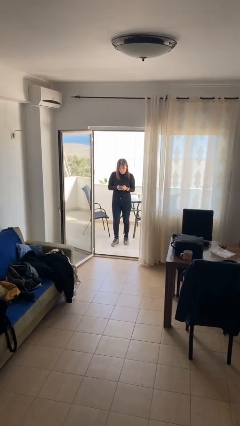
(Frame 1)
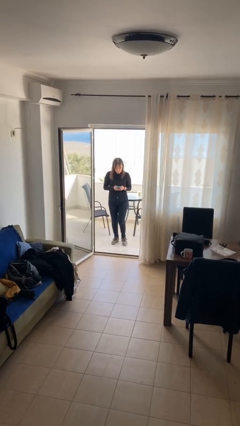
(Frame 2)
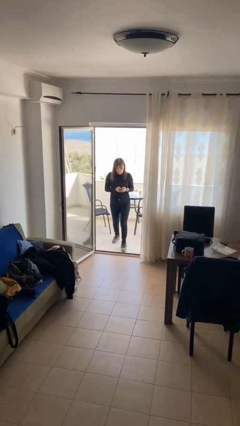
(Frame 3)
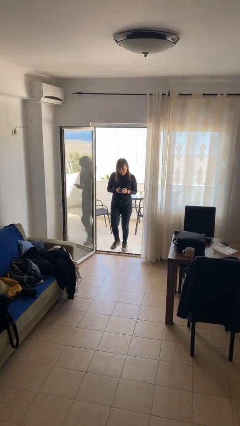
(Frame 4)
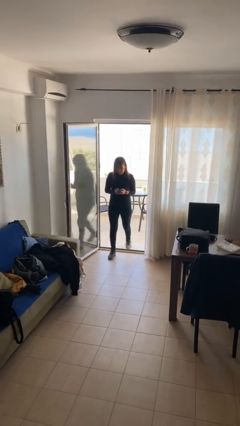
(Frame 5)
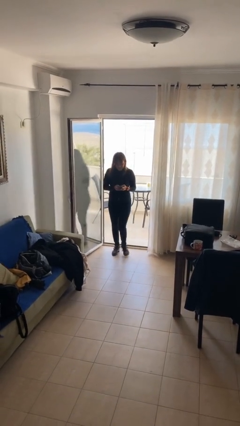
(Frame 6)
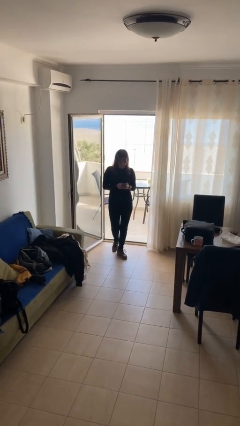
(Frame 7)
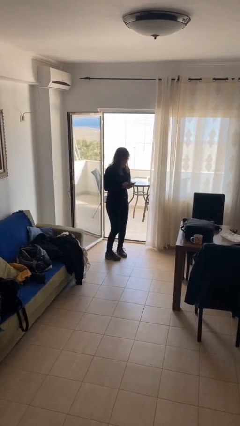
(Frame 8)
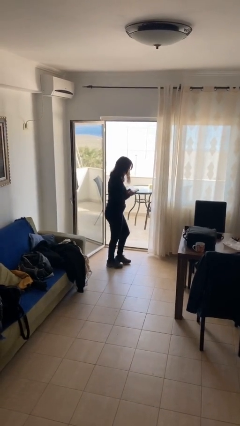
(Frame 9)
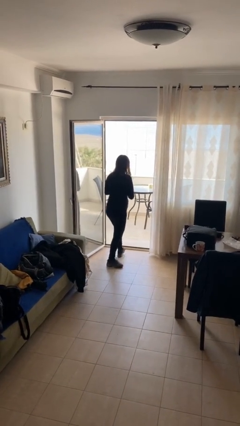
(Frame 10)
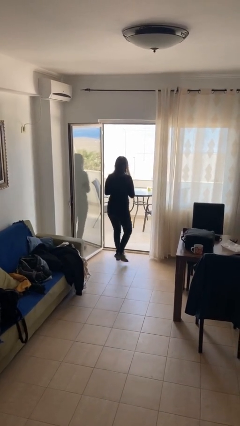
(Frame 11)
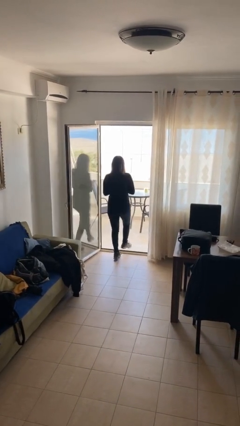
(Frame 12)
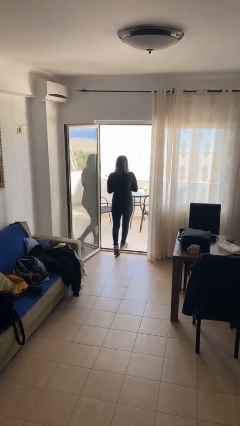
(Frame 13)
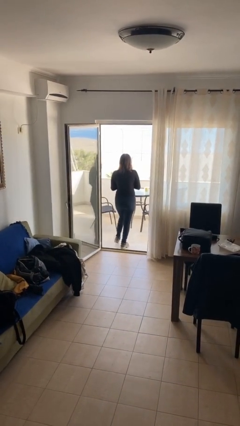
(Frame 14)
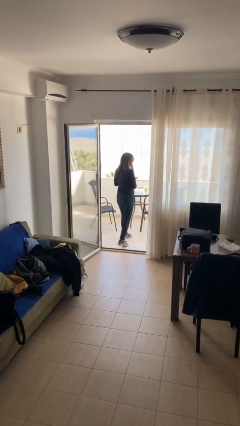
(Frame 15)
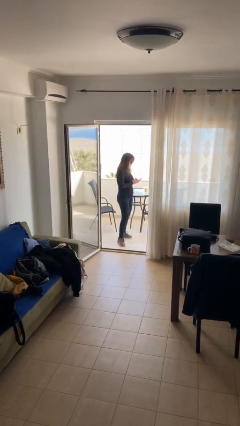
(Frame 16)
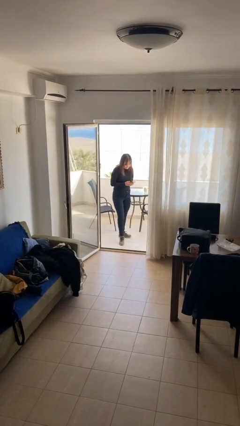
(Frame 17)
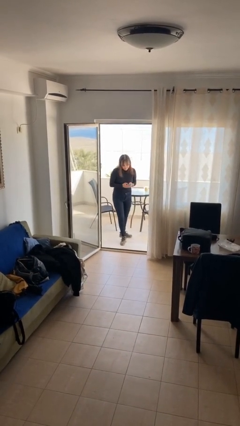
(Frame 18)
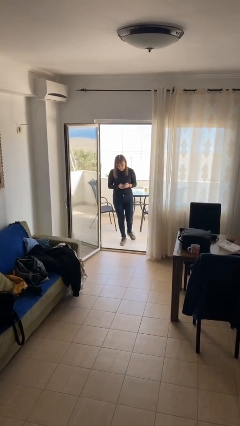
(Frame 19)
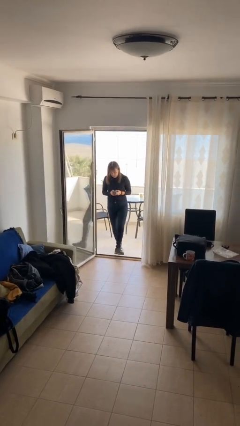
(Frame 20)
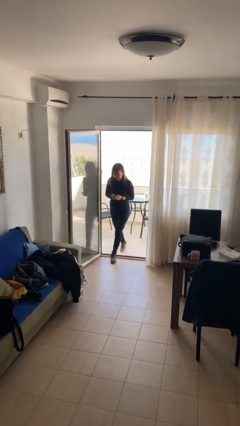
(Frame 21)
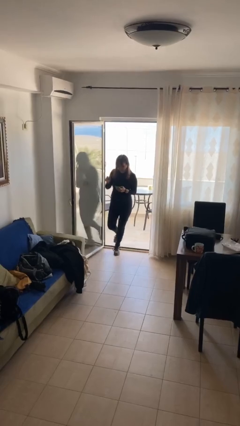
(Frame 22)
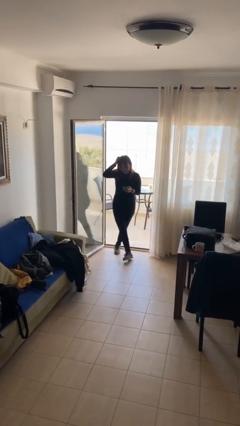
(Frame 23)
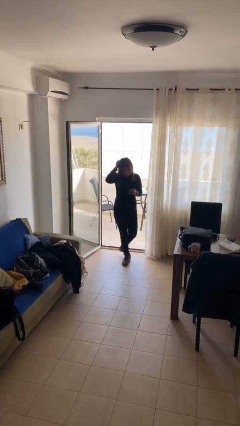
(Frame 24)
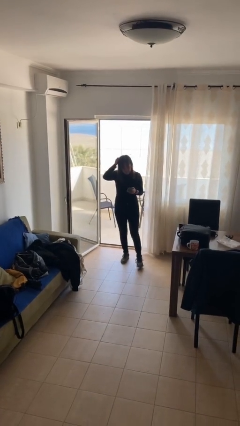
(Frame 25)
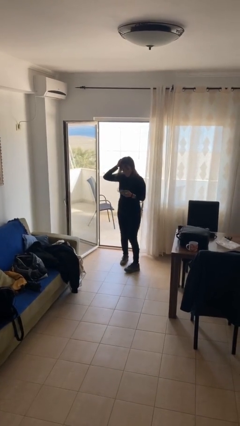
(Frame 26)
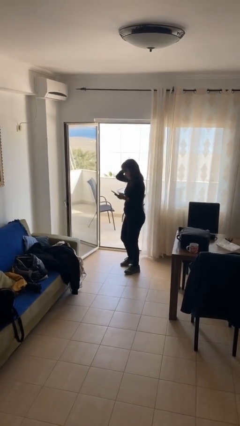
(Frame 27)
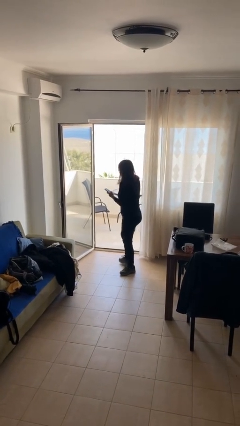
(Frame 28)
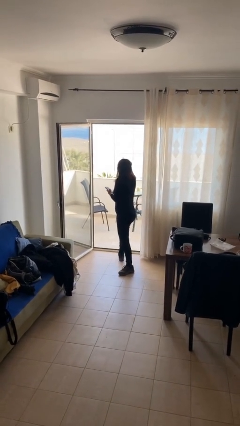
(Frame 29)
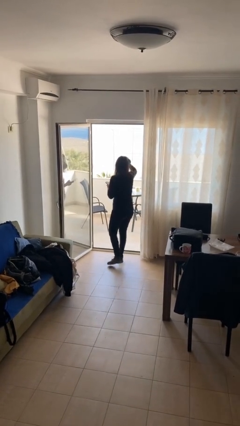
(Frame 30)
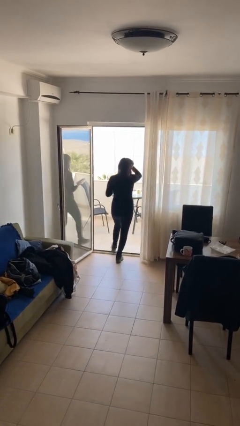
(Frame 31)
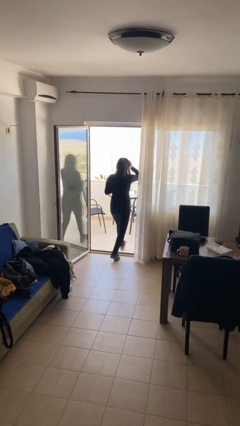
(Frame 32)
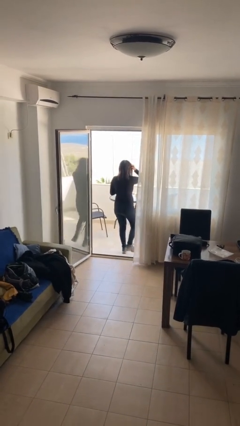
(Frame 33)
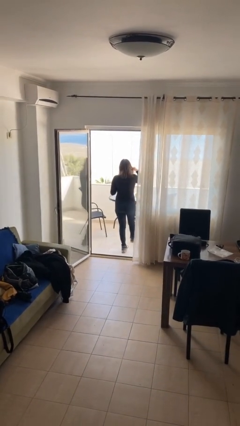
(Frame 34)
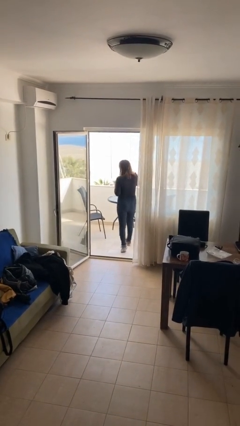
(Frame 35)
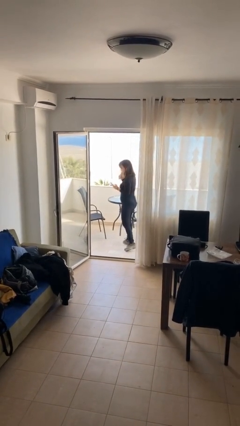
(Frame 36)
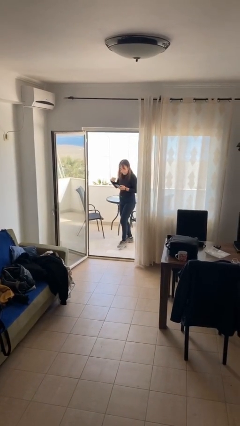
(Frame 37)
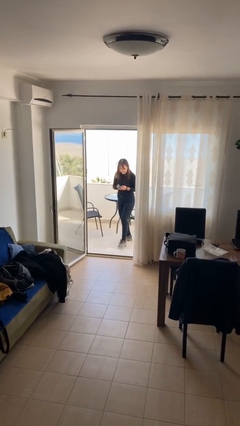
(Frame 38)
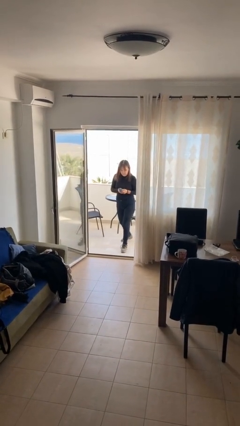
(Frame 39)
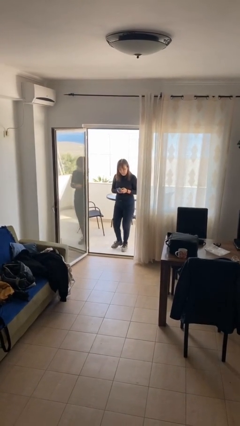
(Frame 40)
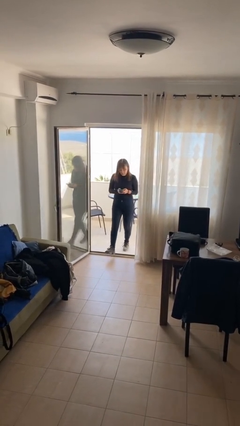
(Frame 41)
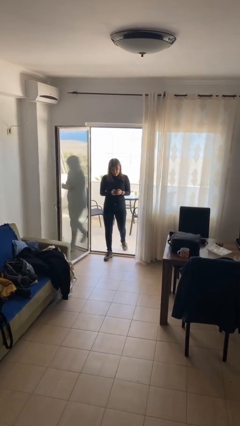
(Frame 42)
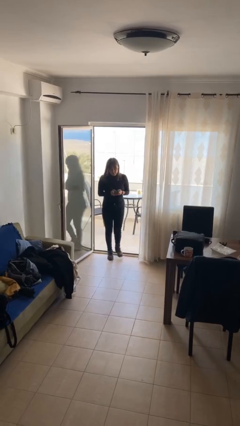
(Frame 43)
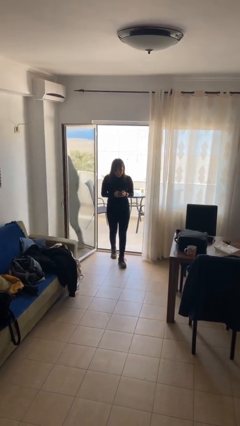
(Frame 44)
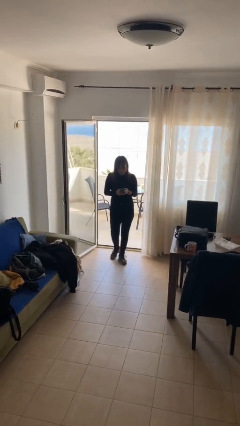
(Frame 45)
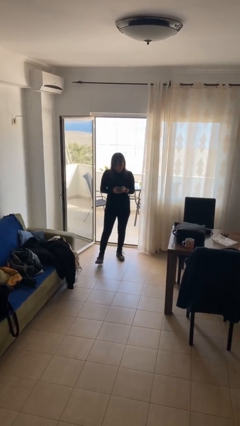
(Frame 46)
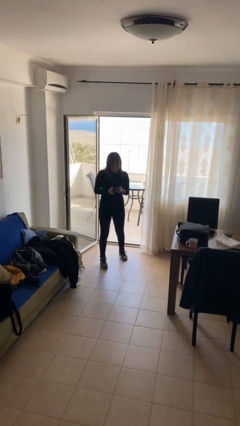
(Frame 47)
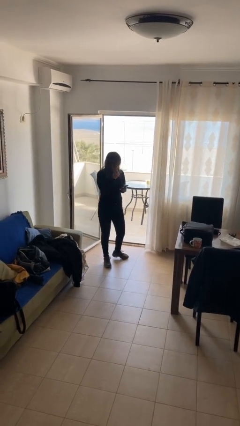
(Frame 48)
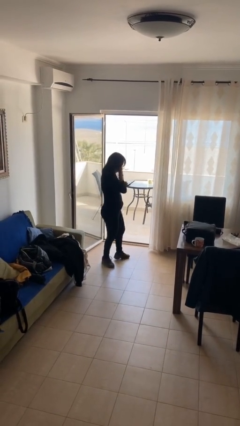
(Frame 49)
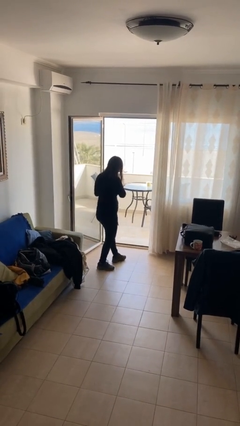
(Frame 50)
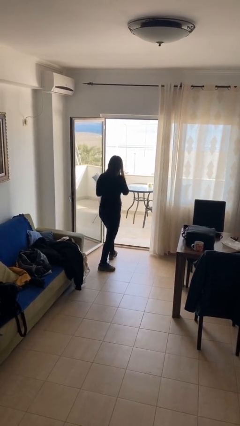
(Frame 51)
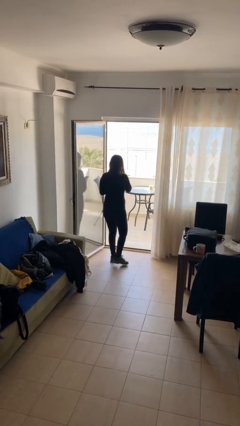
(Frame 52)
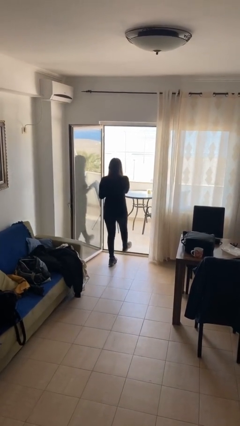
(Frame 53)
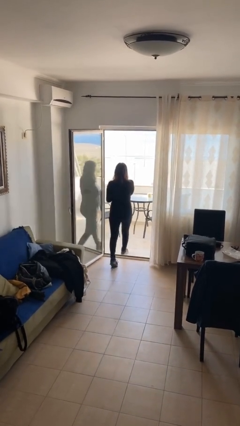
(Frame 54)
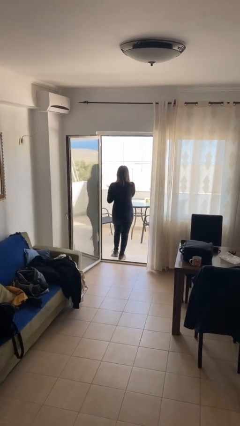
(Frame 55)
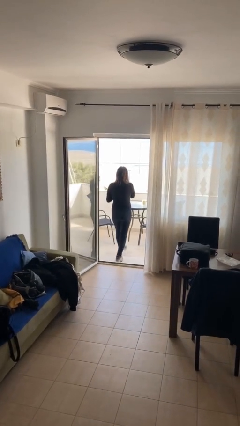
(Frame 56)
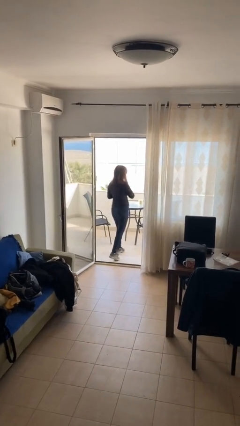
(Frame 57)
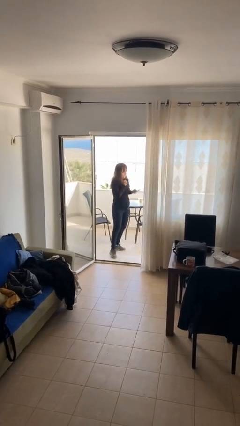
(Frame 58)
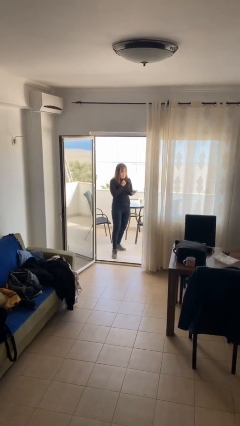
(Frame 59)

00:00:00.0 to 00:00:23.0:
person texts on phone

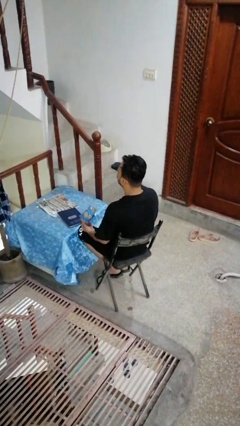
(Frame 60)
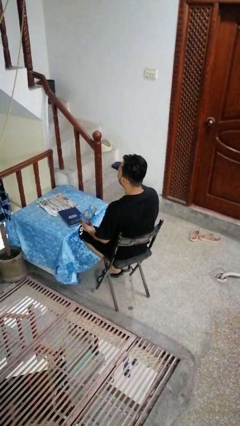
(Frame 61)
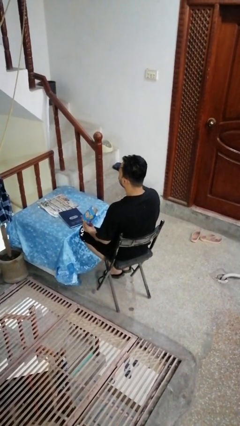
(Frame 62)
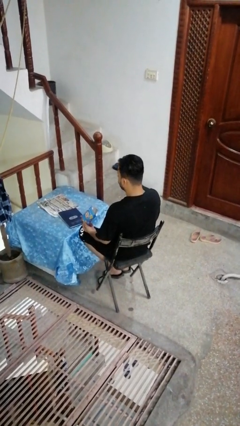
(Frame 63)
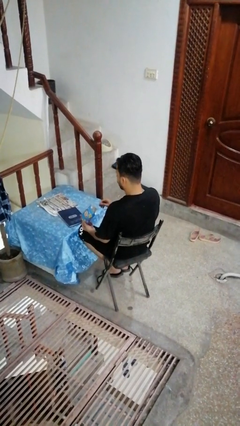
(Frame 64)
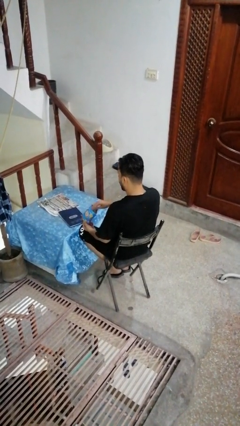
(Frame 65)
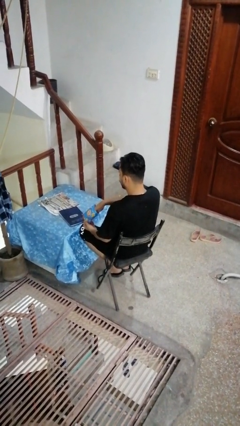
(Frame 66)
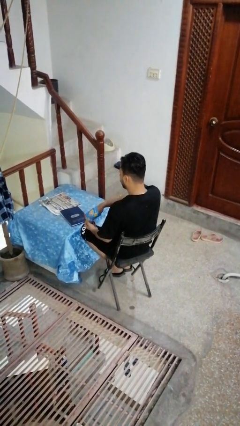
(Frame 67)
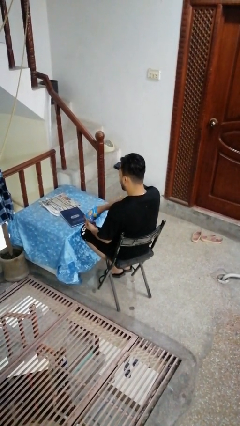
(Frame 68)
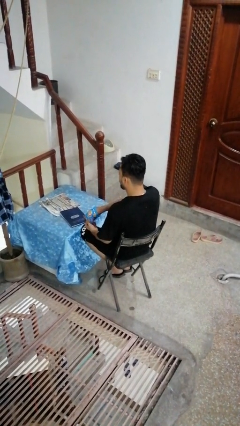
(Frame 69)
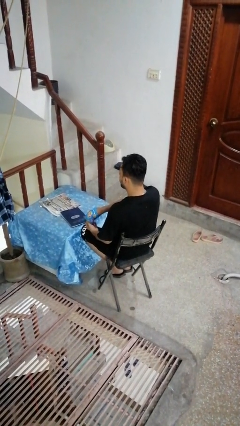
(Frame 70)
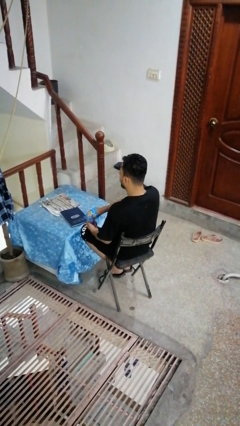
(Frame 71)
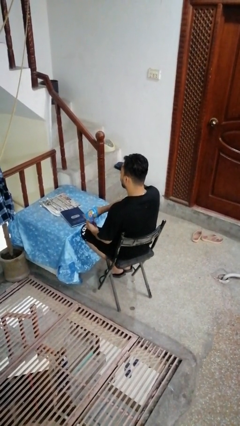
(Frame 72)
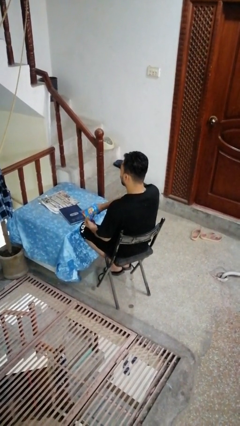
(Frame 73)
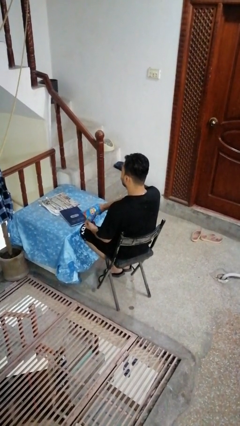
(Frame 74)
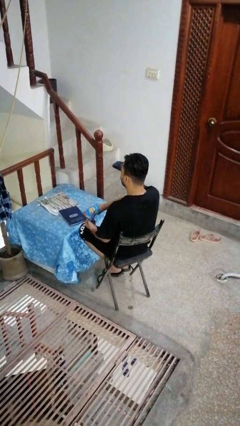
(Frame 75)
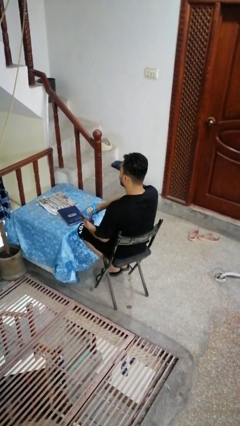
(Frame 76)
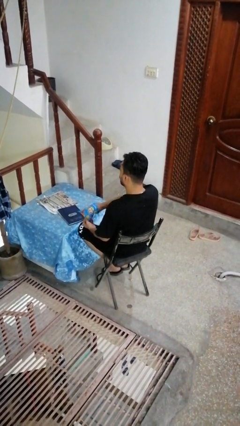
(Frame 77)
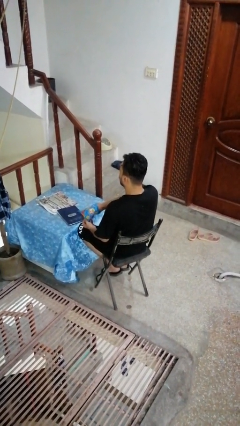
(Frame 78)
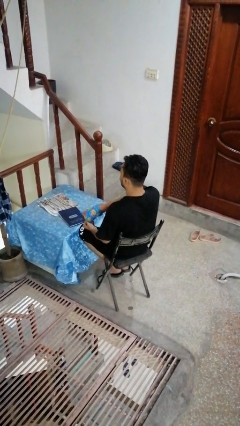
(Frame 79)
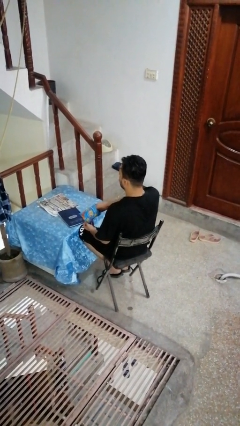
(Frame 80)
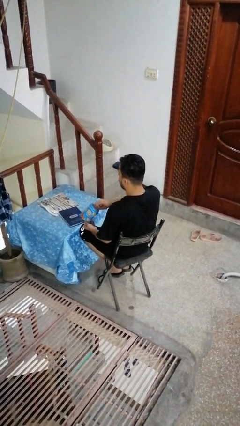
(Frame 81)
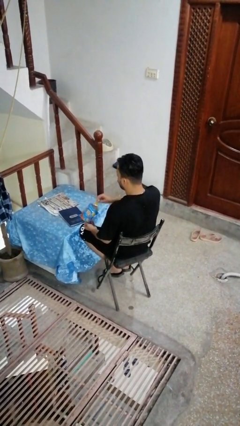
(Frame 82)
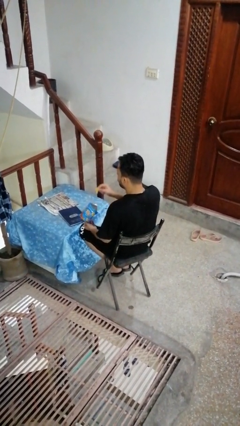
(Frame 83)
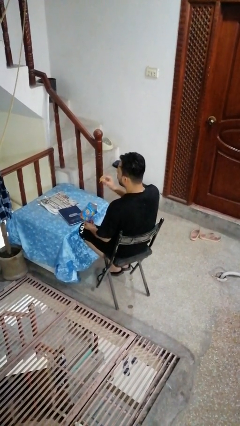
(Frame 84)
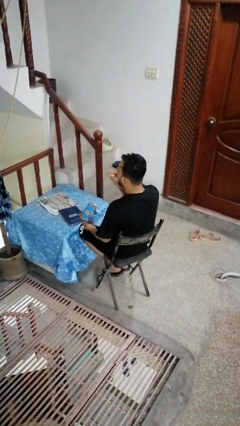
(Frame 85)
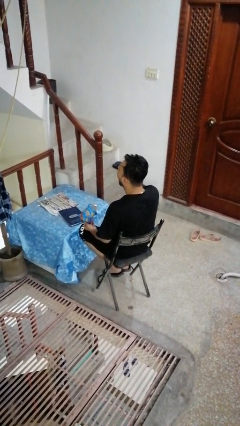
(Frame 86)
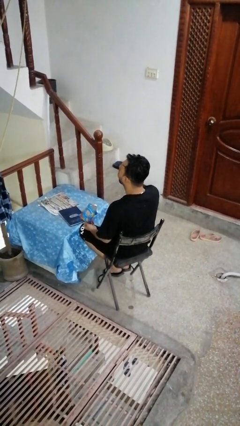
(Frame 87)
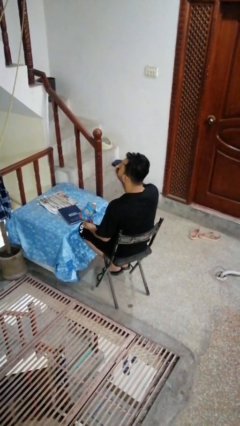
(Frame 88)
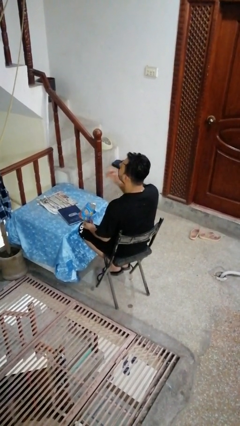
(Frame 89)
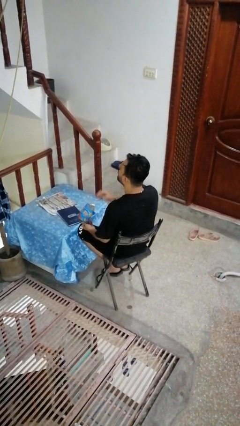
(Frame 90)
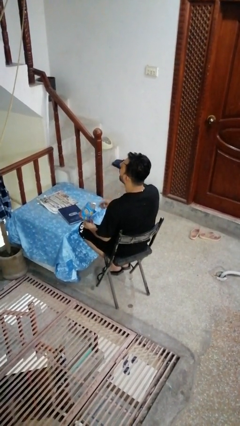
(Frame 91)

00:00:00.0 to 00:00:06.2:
person eats snack from bag

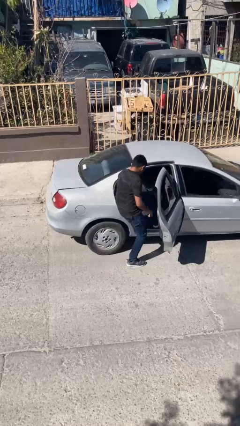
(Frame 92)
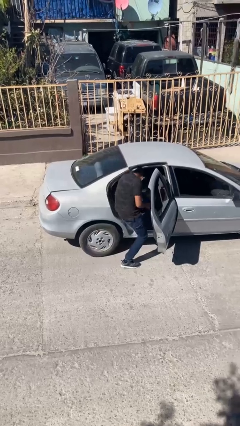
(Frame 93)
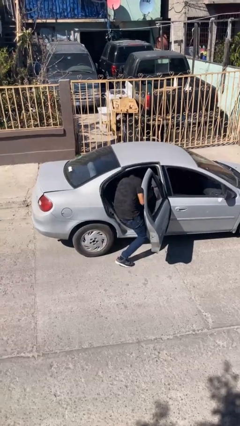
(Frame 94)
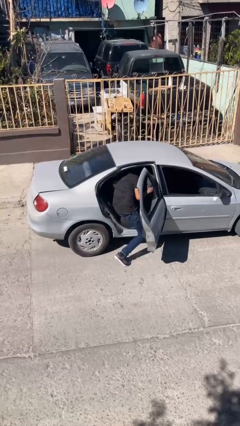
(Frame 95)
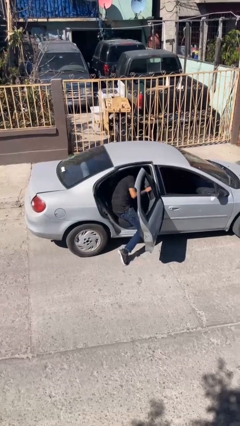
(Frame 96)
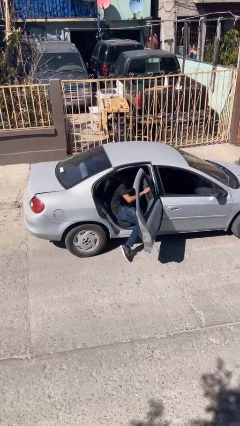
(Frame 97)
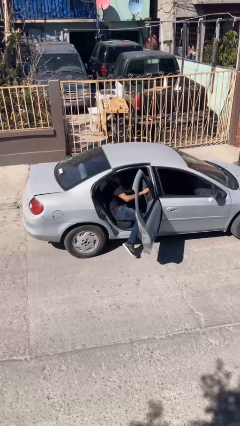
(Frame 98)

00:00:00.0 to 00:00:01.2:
person enters car
